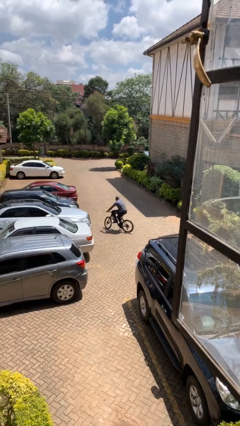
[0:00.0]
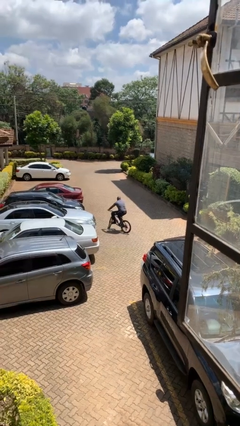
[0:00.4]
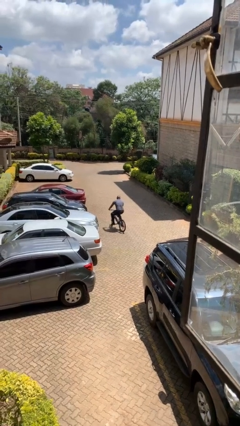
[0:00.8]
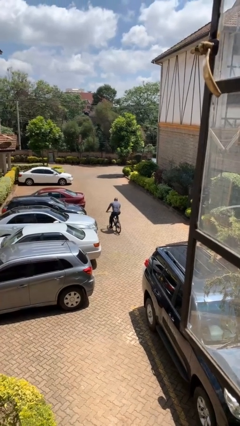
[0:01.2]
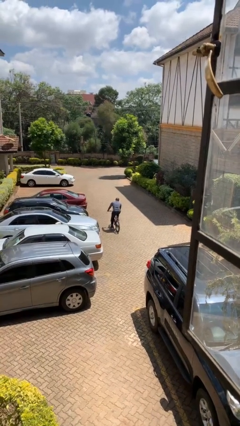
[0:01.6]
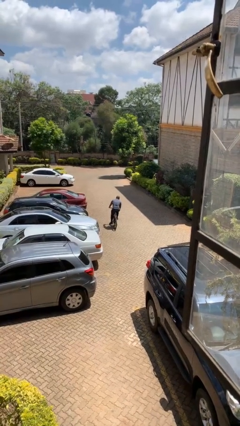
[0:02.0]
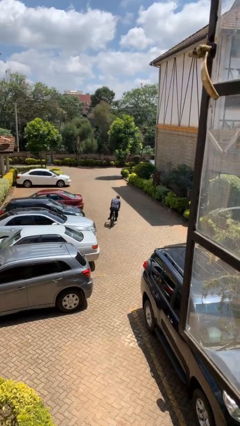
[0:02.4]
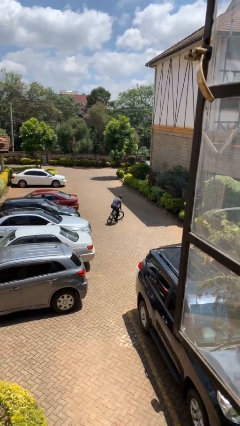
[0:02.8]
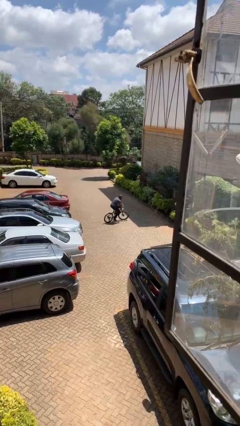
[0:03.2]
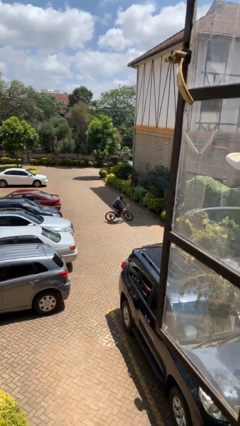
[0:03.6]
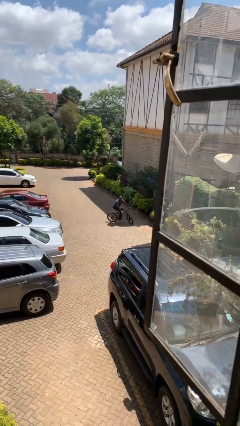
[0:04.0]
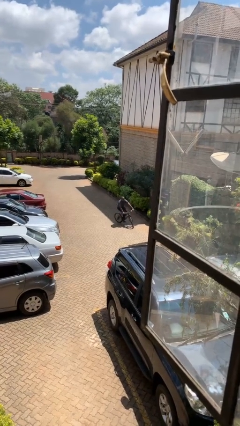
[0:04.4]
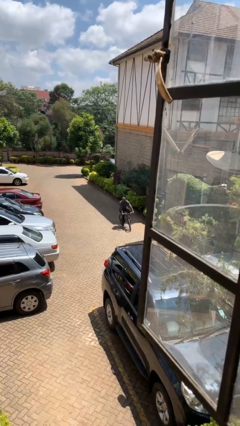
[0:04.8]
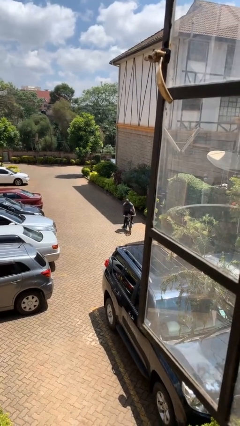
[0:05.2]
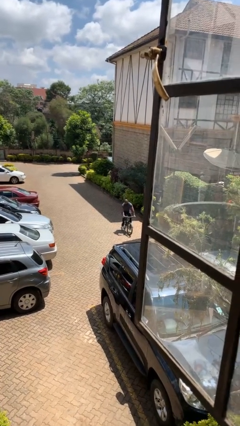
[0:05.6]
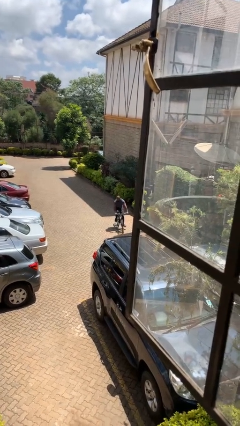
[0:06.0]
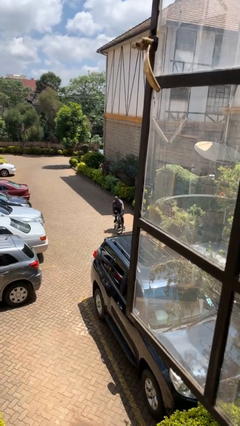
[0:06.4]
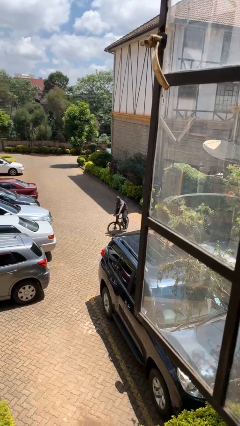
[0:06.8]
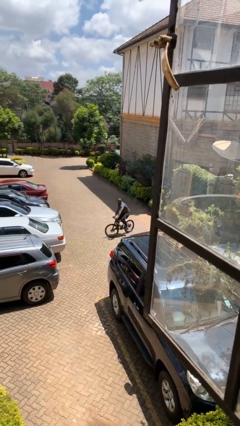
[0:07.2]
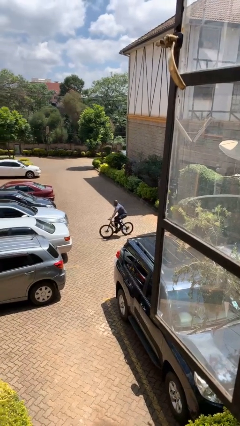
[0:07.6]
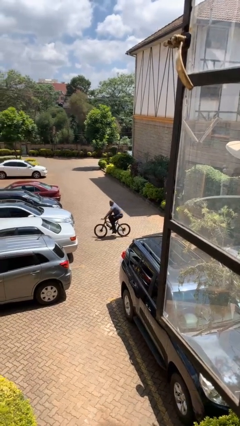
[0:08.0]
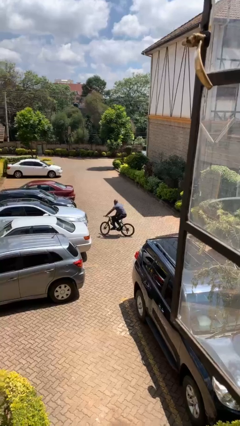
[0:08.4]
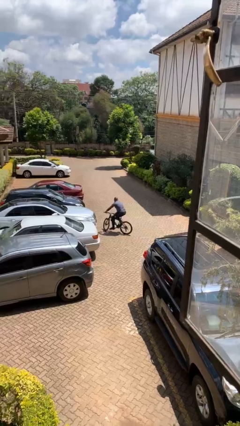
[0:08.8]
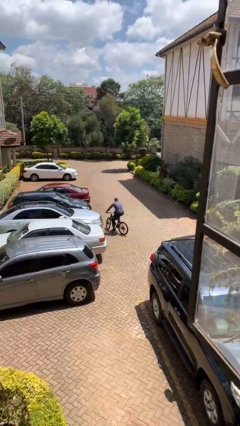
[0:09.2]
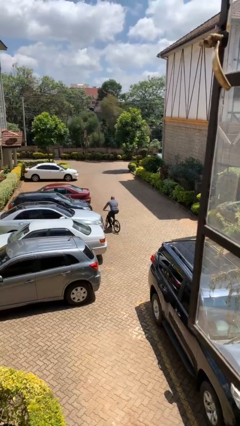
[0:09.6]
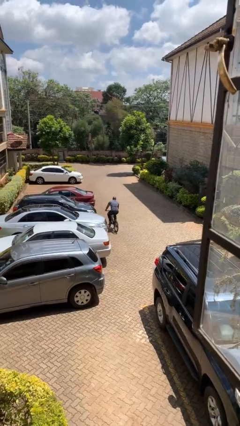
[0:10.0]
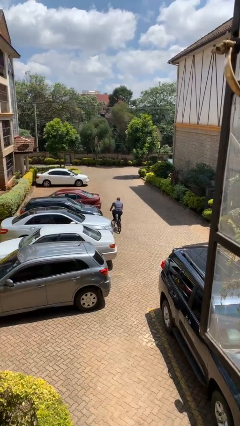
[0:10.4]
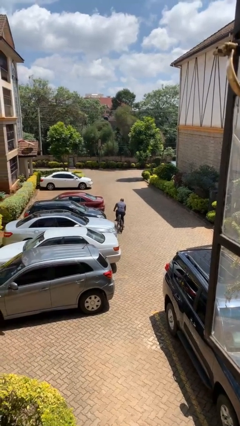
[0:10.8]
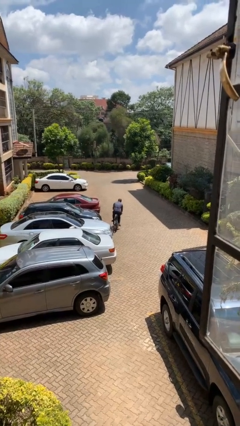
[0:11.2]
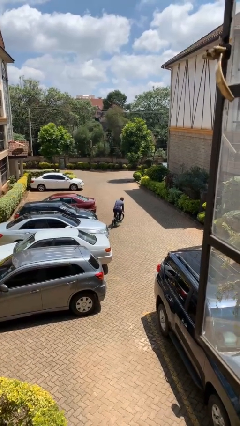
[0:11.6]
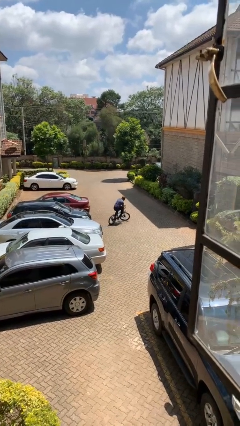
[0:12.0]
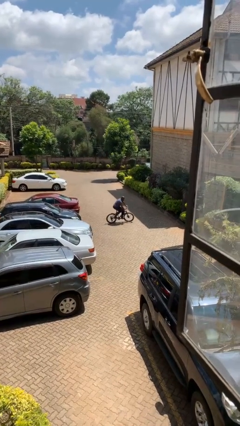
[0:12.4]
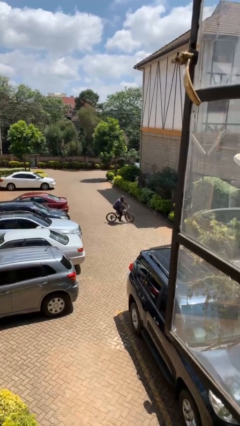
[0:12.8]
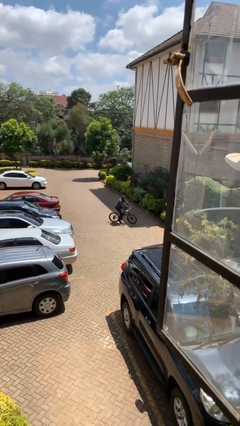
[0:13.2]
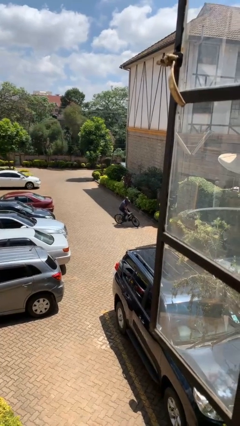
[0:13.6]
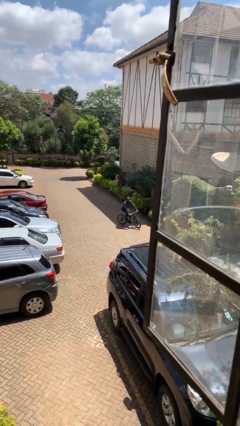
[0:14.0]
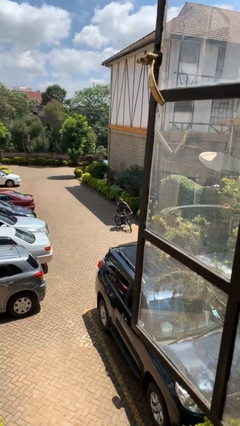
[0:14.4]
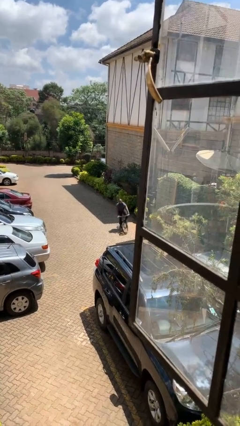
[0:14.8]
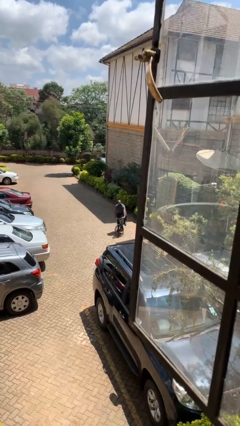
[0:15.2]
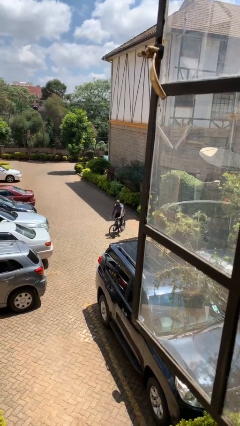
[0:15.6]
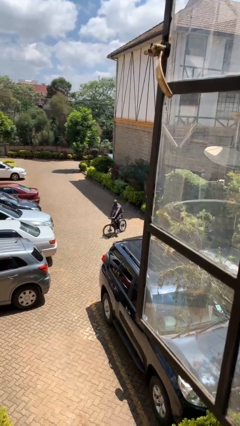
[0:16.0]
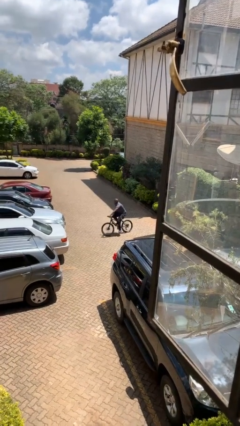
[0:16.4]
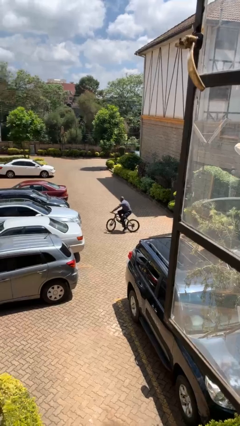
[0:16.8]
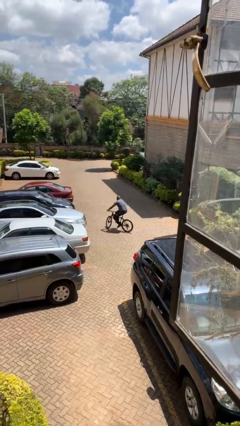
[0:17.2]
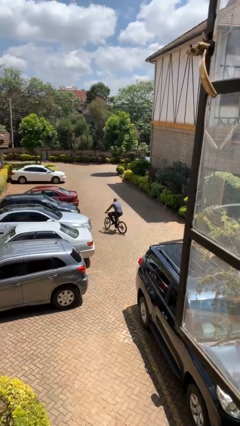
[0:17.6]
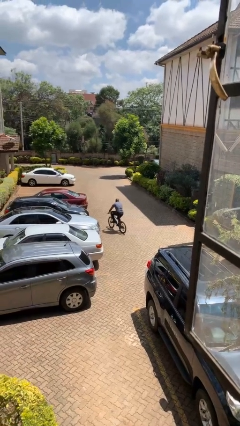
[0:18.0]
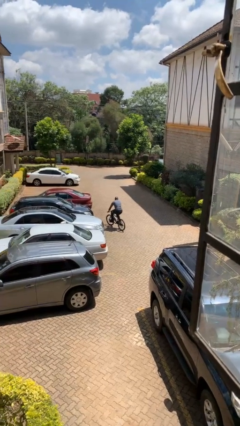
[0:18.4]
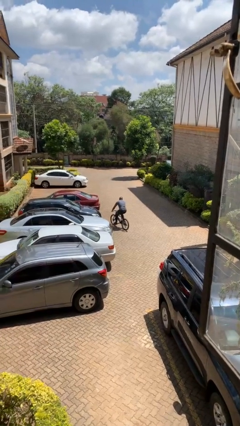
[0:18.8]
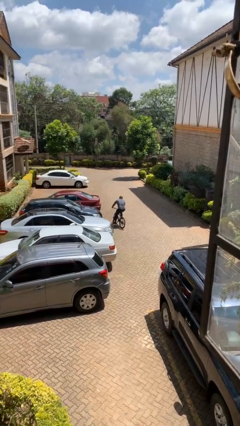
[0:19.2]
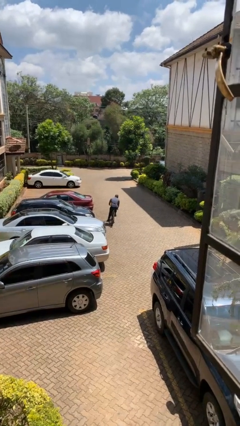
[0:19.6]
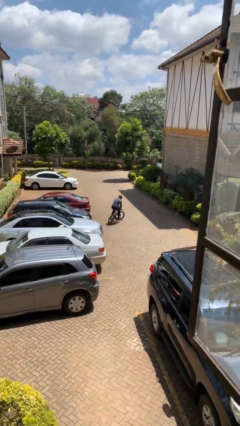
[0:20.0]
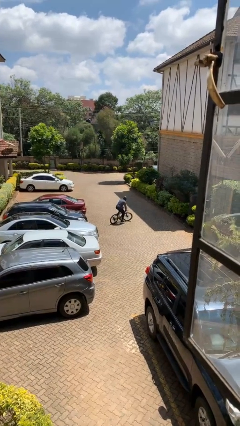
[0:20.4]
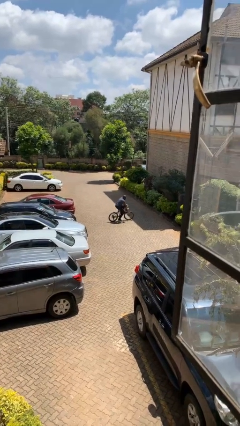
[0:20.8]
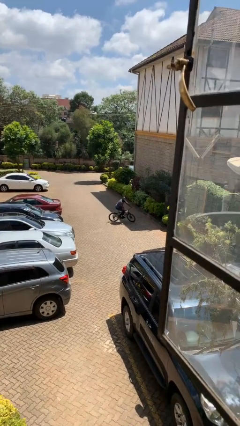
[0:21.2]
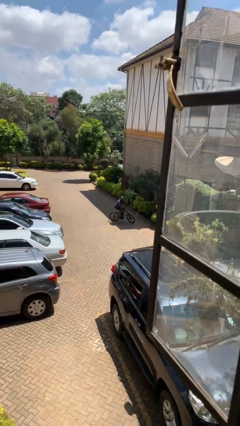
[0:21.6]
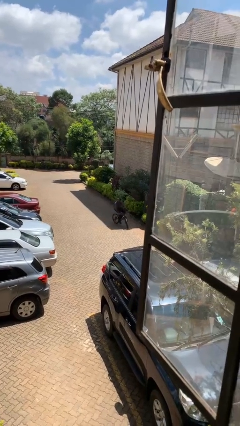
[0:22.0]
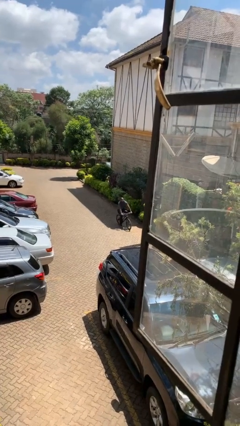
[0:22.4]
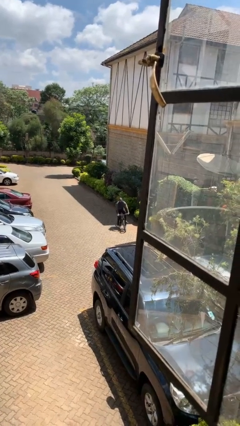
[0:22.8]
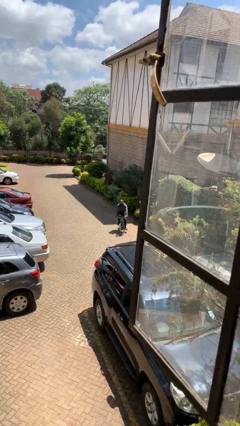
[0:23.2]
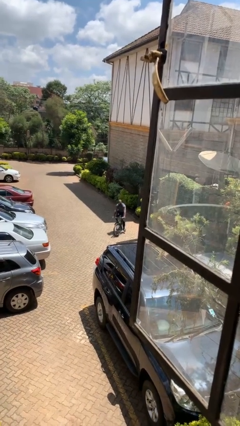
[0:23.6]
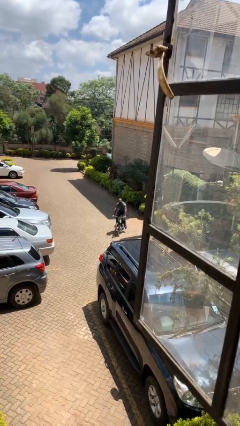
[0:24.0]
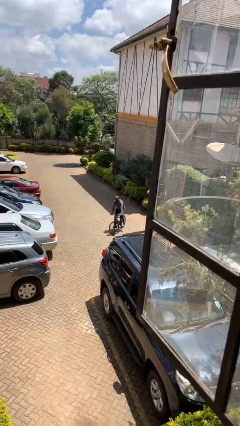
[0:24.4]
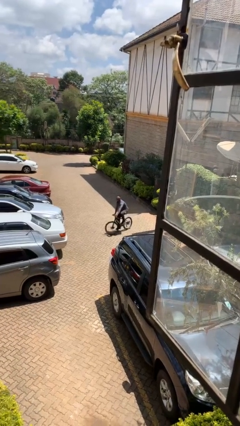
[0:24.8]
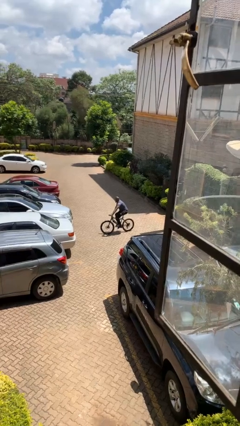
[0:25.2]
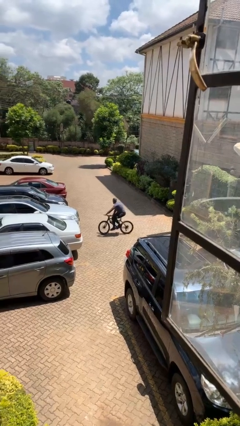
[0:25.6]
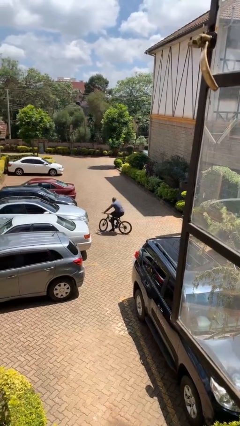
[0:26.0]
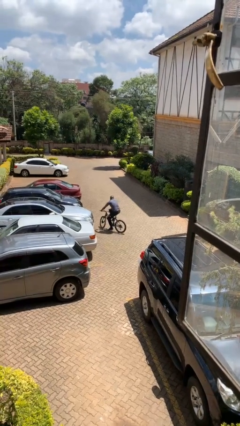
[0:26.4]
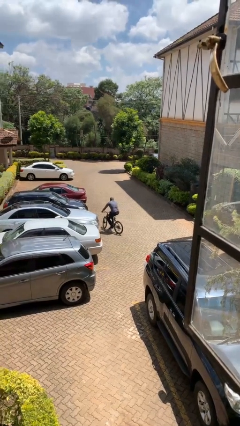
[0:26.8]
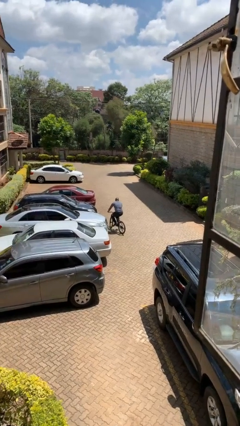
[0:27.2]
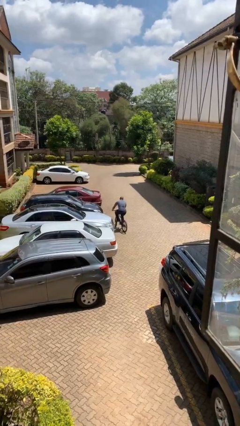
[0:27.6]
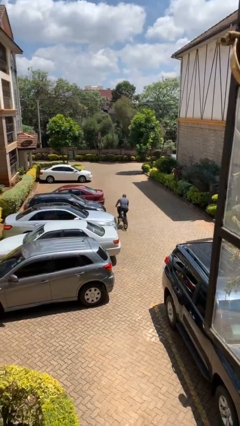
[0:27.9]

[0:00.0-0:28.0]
person rides bicycle

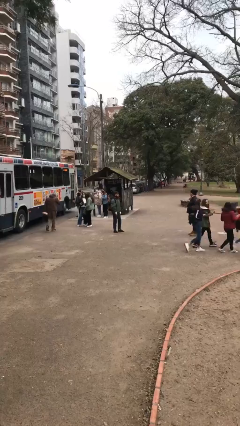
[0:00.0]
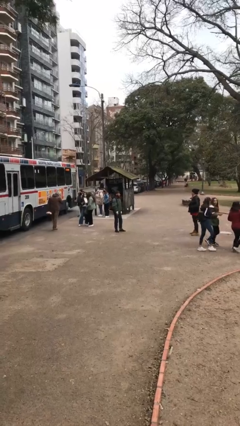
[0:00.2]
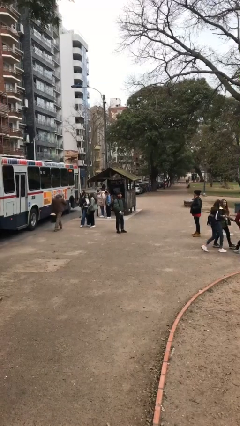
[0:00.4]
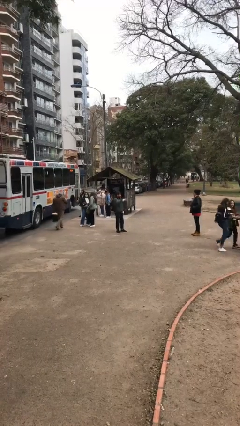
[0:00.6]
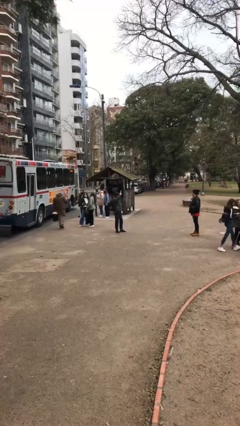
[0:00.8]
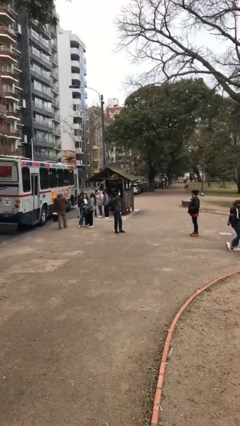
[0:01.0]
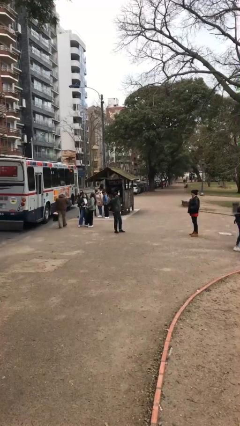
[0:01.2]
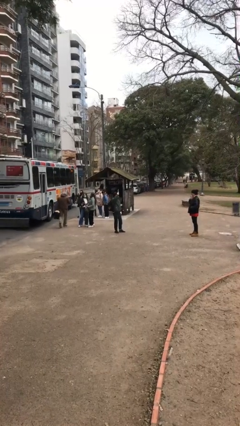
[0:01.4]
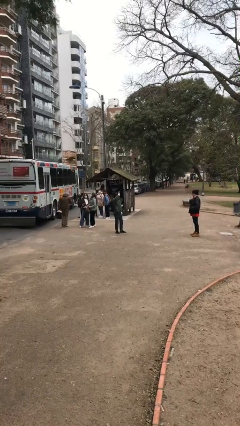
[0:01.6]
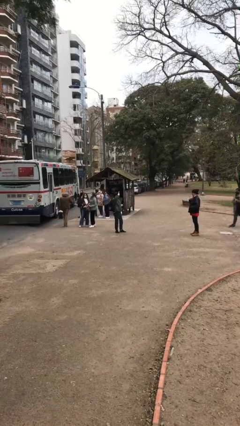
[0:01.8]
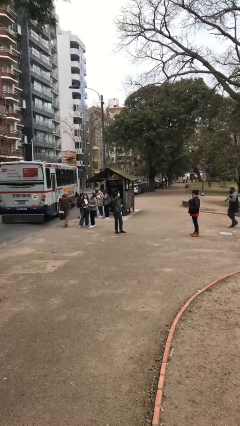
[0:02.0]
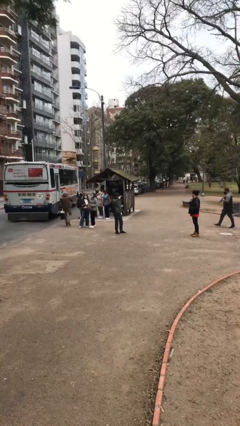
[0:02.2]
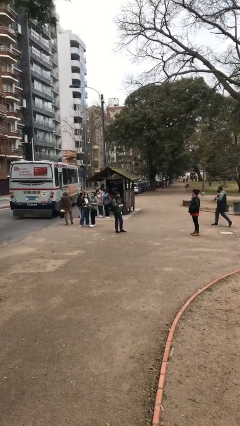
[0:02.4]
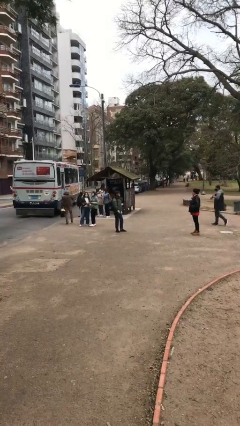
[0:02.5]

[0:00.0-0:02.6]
person waves at person

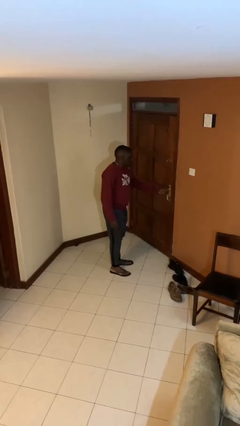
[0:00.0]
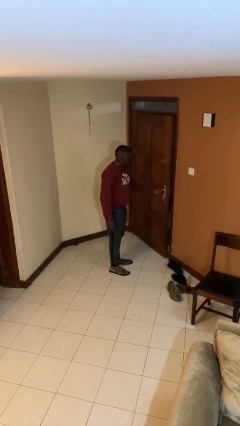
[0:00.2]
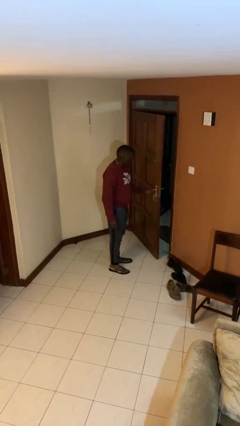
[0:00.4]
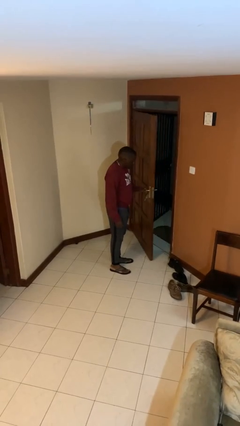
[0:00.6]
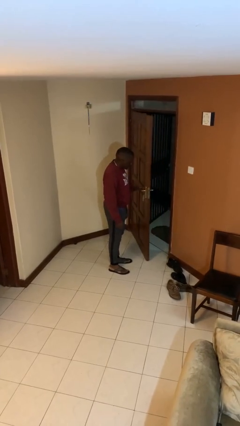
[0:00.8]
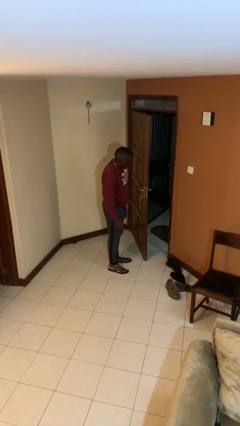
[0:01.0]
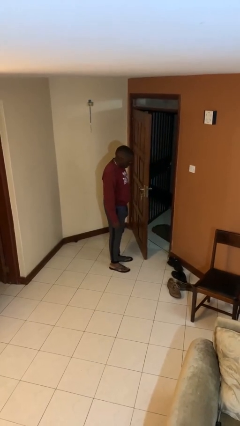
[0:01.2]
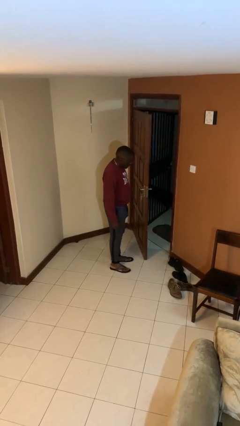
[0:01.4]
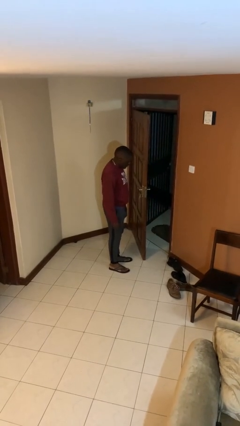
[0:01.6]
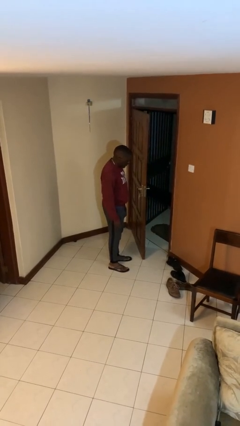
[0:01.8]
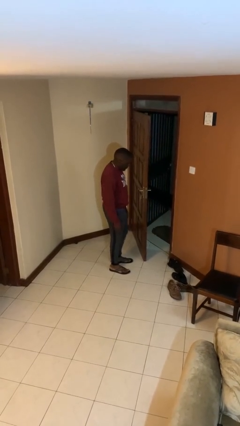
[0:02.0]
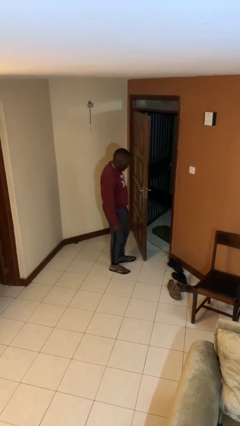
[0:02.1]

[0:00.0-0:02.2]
person opens facility door
